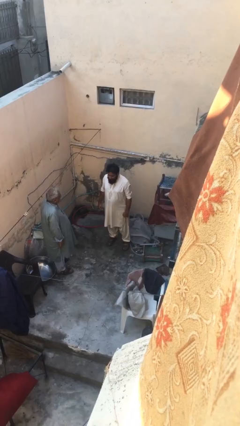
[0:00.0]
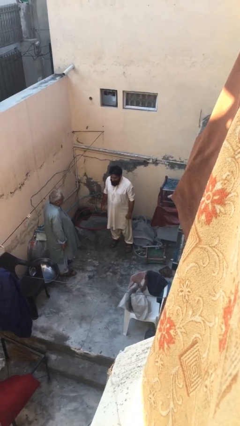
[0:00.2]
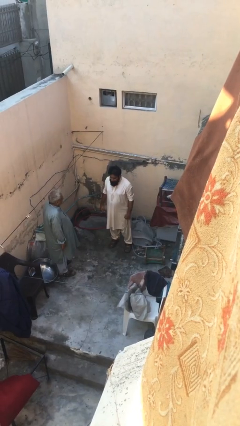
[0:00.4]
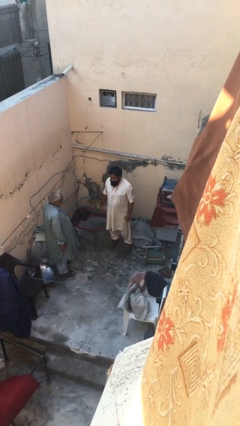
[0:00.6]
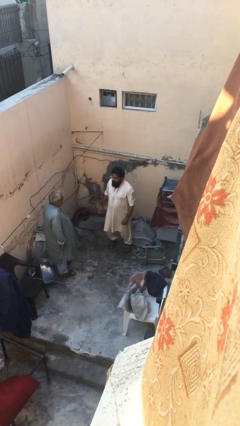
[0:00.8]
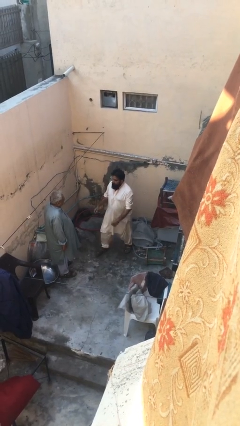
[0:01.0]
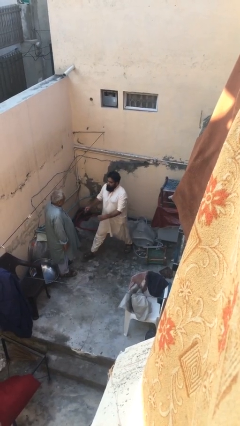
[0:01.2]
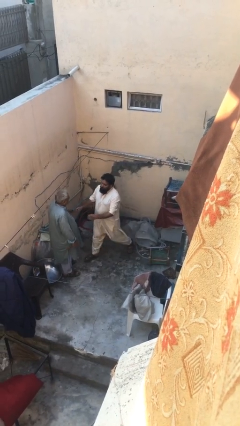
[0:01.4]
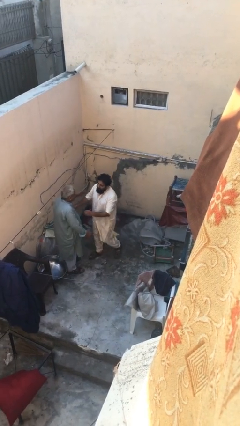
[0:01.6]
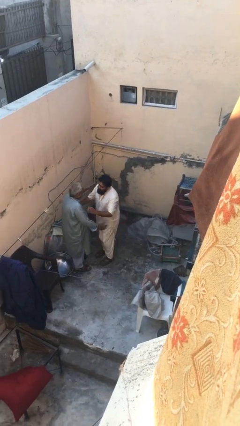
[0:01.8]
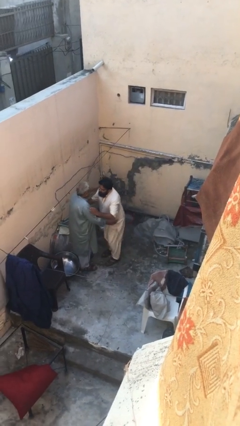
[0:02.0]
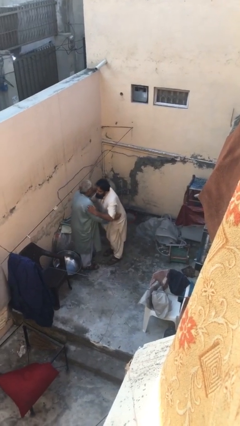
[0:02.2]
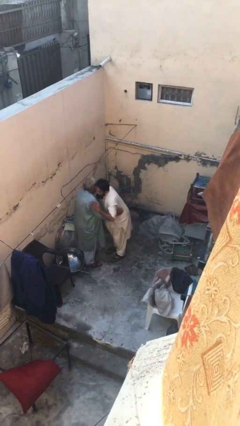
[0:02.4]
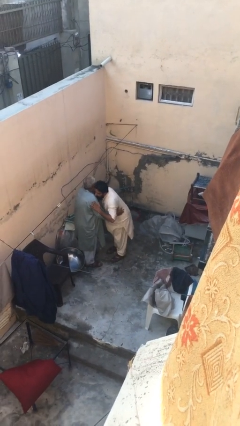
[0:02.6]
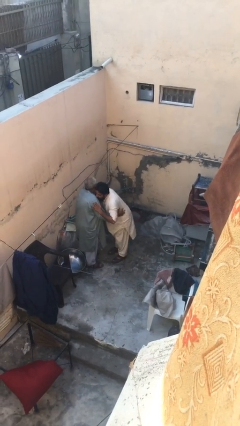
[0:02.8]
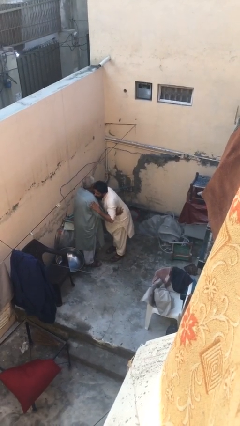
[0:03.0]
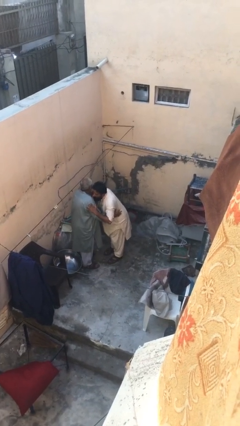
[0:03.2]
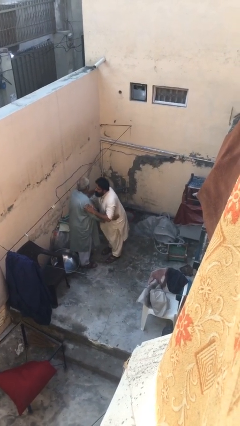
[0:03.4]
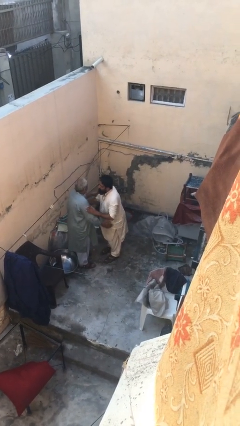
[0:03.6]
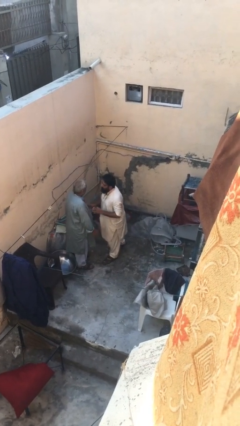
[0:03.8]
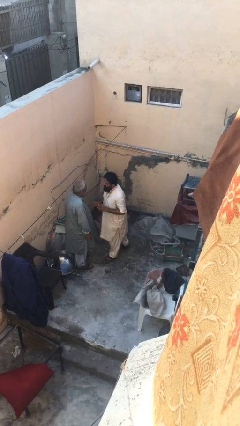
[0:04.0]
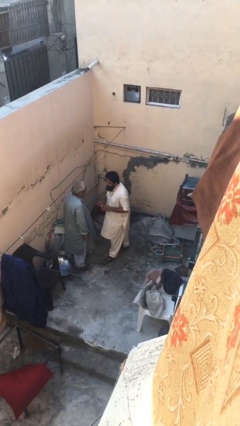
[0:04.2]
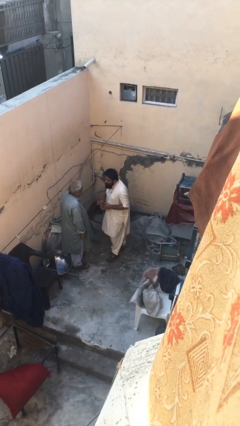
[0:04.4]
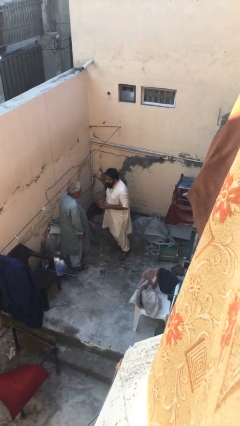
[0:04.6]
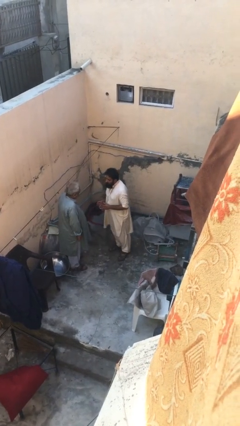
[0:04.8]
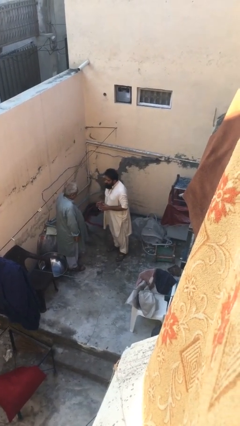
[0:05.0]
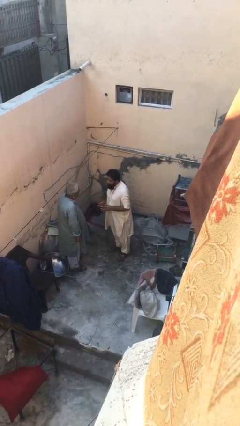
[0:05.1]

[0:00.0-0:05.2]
person embraces person

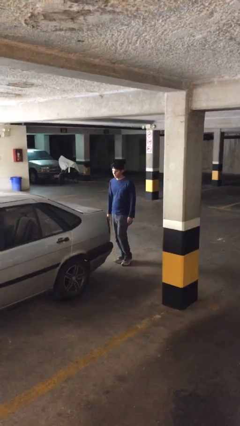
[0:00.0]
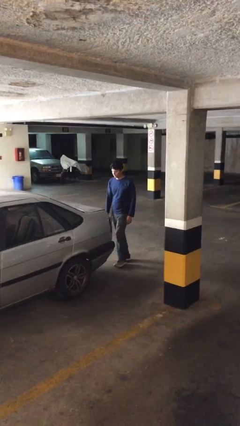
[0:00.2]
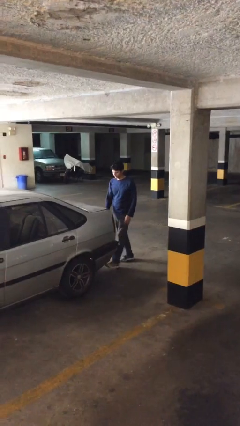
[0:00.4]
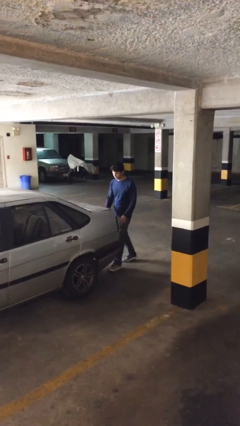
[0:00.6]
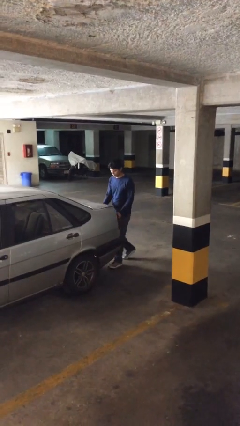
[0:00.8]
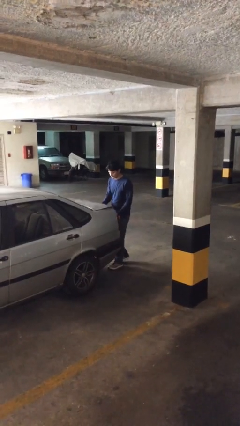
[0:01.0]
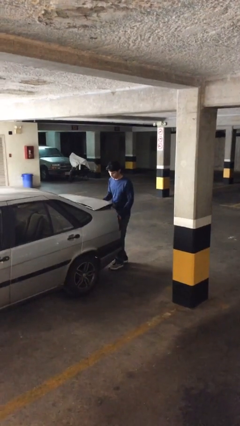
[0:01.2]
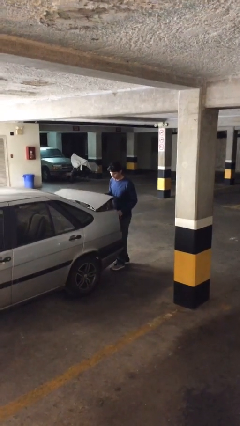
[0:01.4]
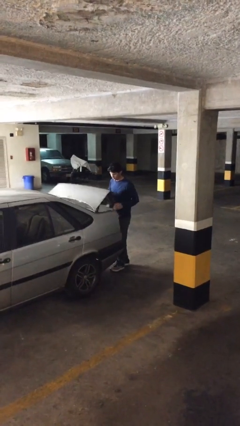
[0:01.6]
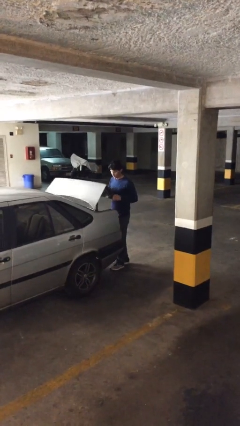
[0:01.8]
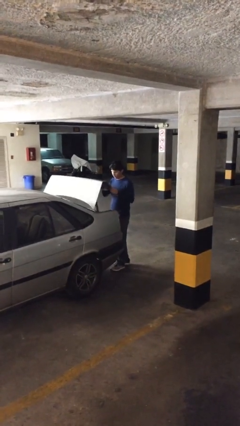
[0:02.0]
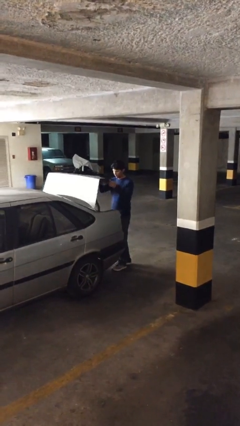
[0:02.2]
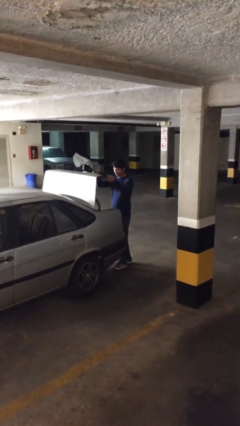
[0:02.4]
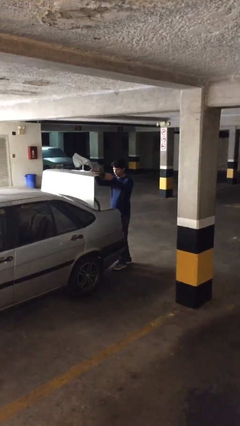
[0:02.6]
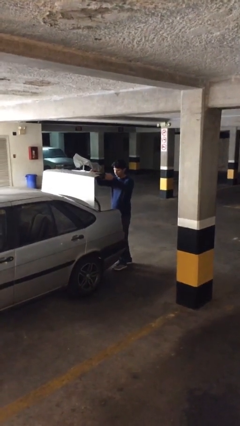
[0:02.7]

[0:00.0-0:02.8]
person opens car trunk

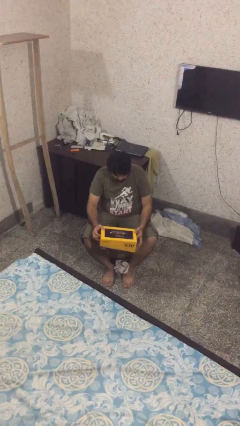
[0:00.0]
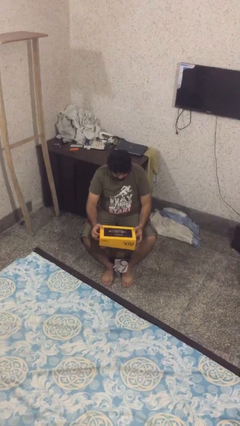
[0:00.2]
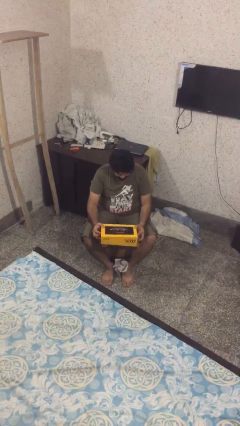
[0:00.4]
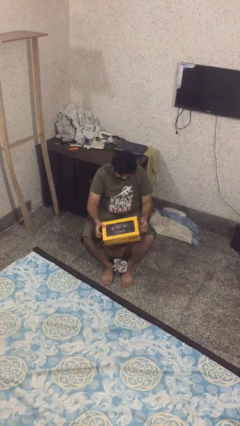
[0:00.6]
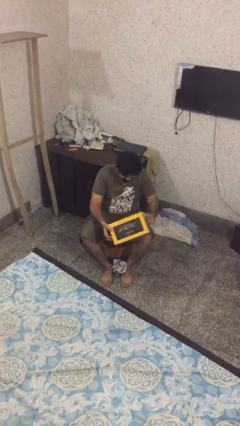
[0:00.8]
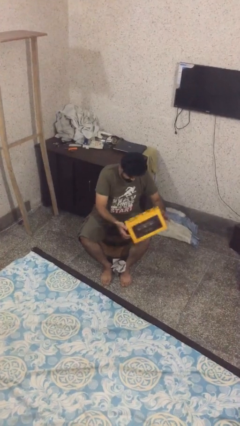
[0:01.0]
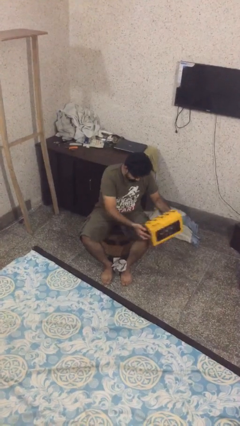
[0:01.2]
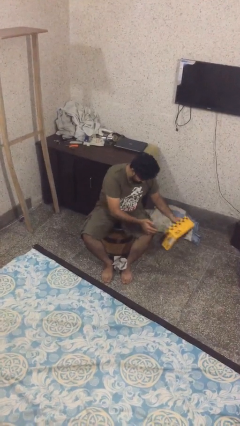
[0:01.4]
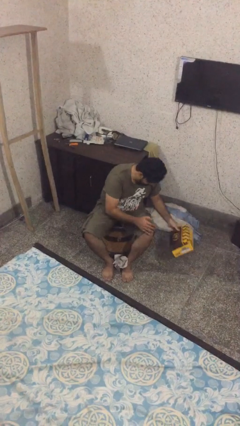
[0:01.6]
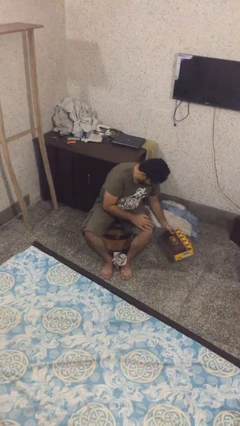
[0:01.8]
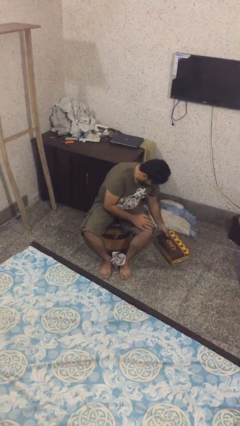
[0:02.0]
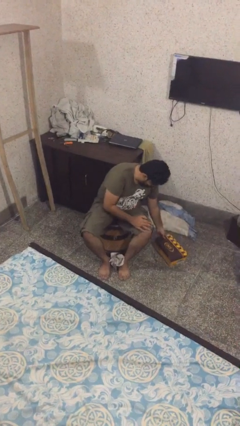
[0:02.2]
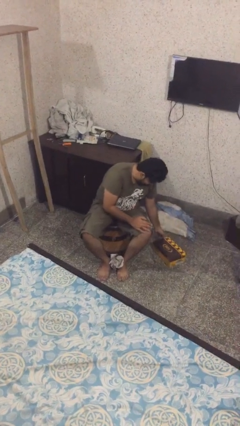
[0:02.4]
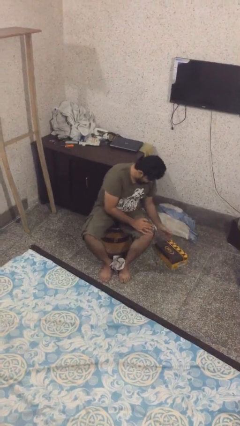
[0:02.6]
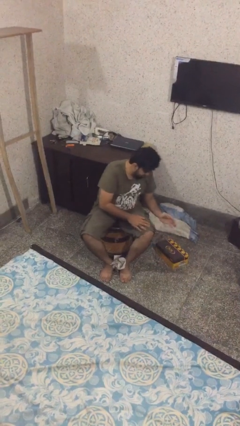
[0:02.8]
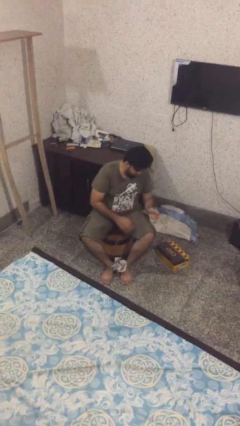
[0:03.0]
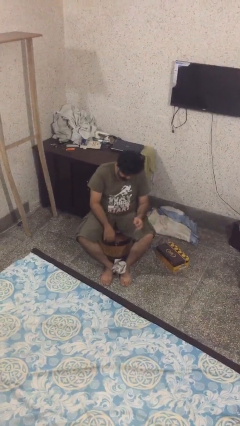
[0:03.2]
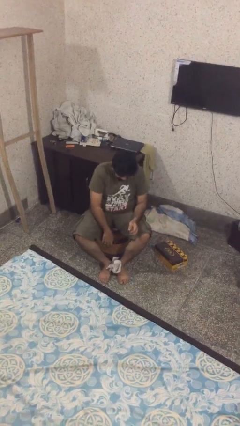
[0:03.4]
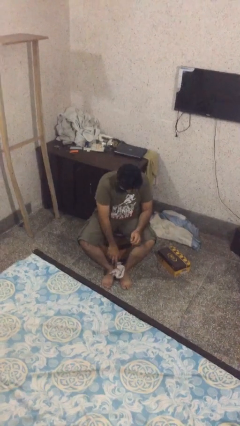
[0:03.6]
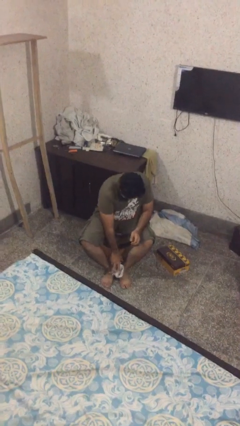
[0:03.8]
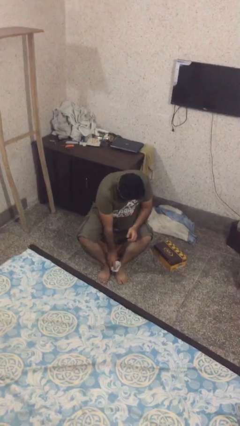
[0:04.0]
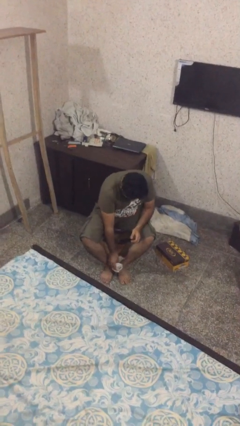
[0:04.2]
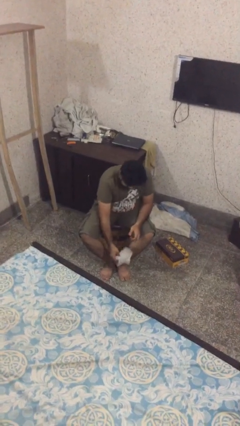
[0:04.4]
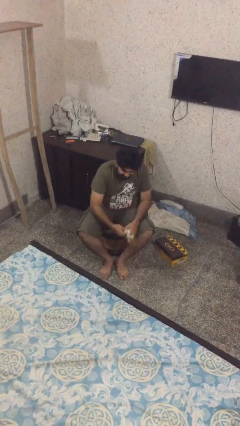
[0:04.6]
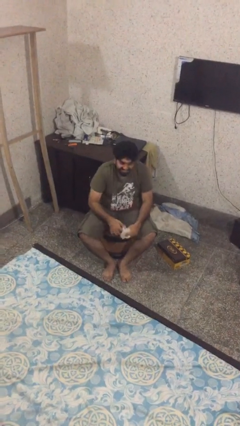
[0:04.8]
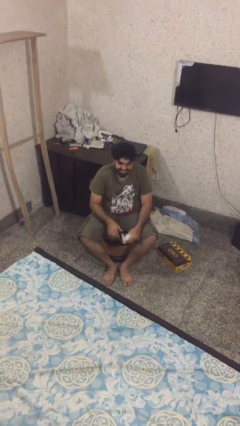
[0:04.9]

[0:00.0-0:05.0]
person puts down object on floor

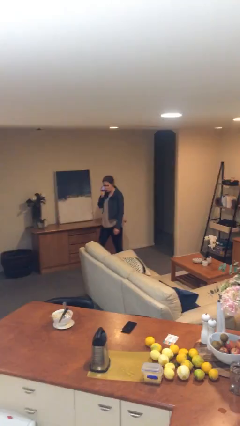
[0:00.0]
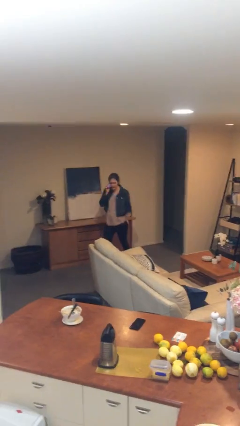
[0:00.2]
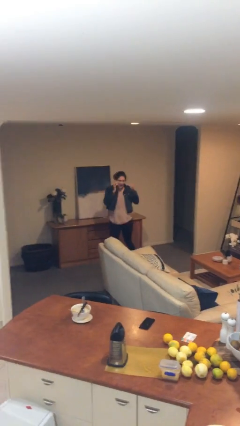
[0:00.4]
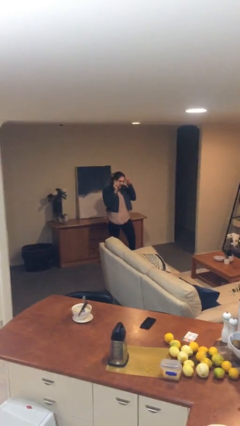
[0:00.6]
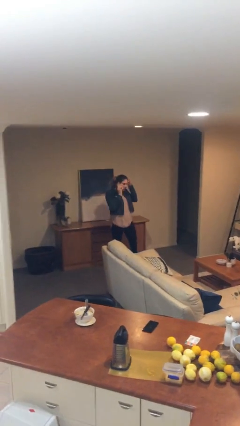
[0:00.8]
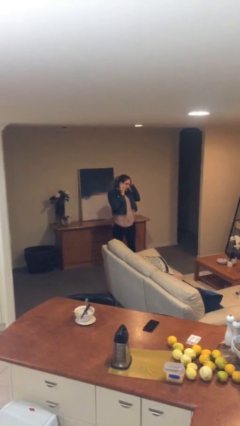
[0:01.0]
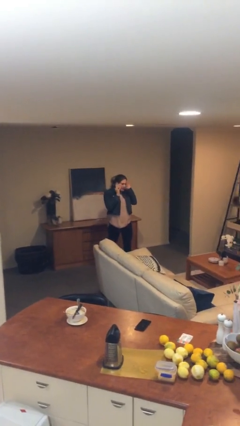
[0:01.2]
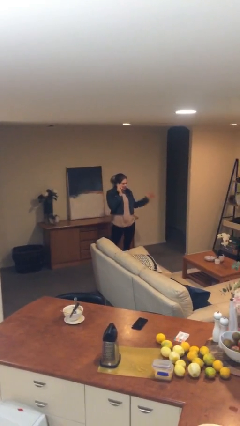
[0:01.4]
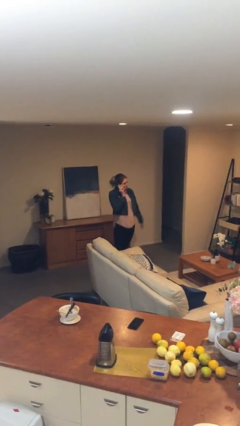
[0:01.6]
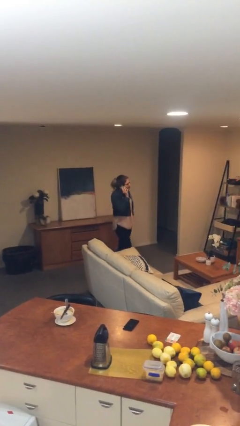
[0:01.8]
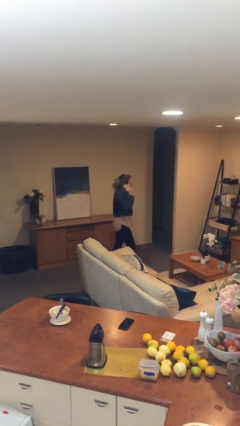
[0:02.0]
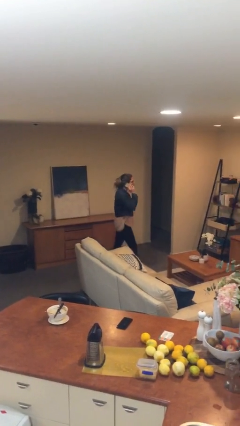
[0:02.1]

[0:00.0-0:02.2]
person talks on phone

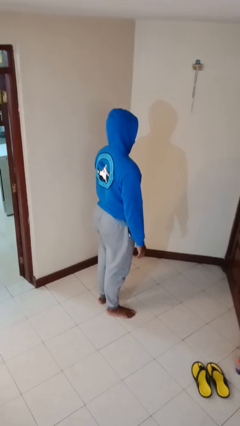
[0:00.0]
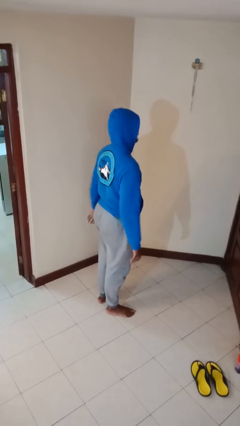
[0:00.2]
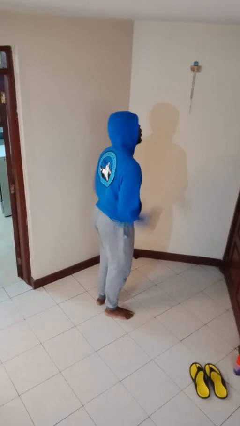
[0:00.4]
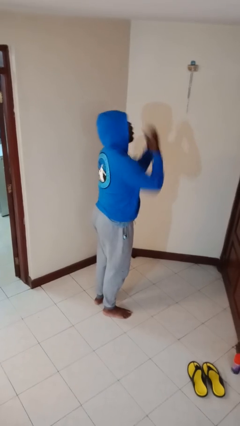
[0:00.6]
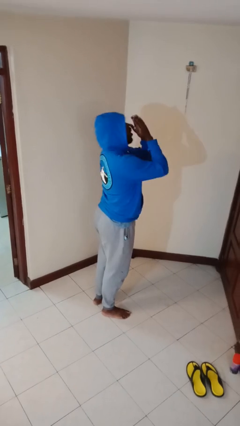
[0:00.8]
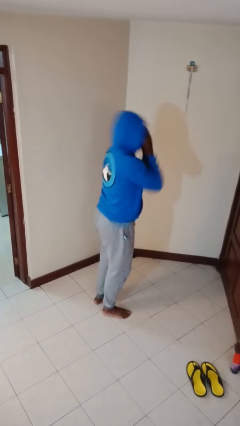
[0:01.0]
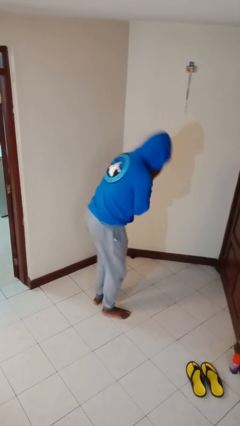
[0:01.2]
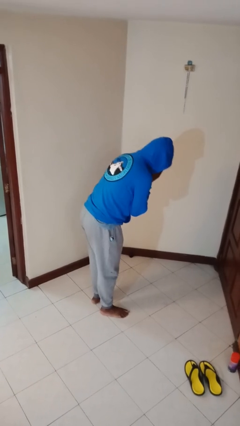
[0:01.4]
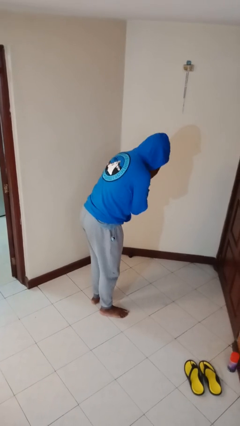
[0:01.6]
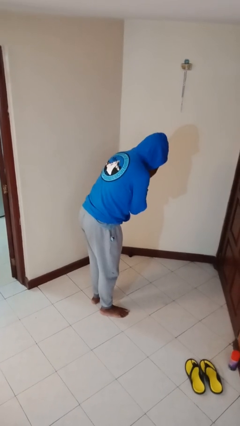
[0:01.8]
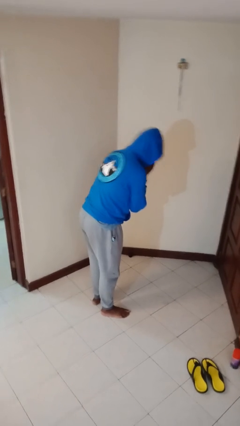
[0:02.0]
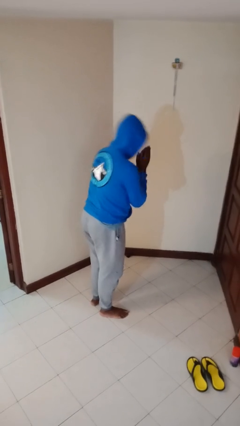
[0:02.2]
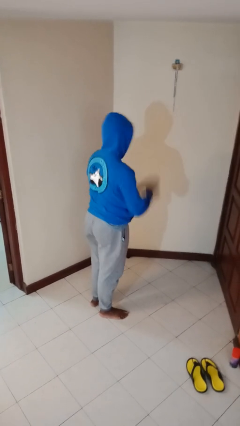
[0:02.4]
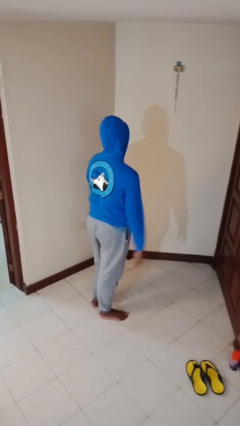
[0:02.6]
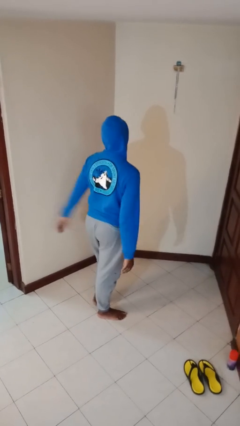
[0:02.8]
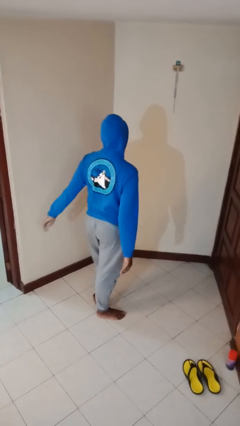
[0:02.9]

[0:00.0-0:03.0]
person sneezes into hand
